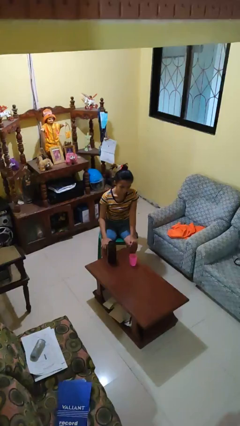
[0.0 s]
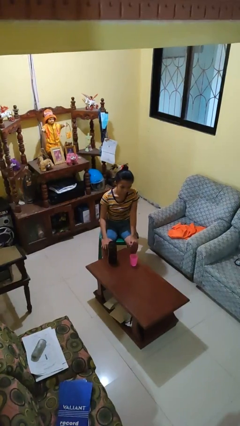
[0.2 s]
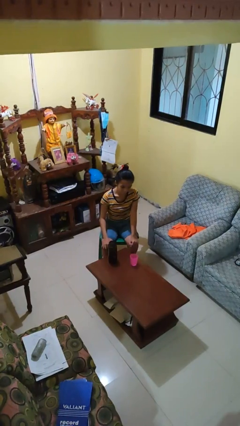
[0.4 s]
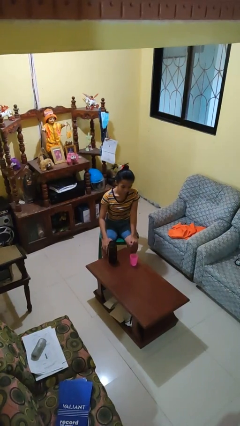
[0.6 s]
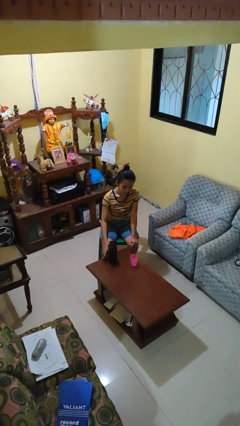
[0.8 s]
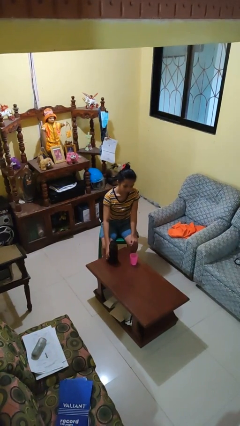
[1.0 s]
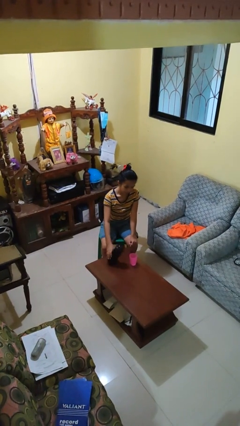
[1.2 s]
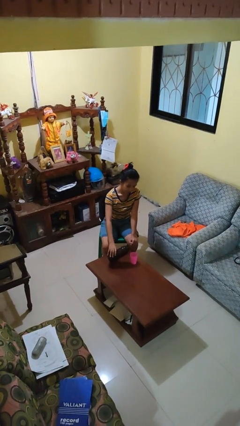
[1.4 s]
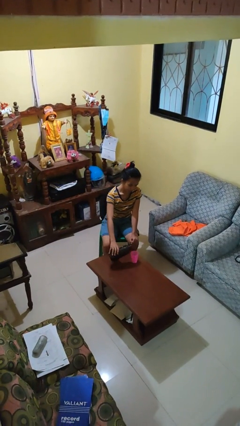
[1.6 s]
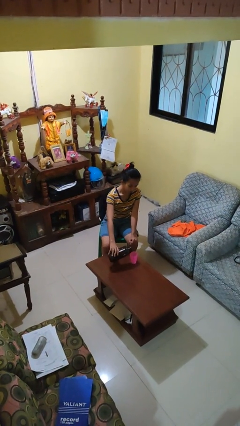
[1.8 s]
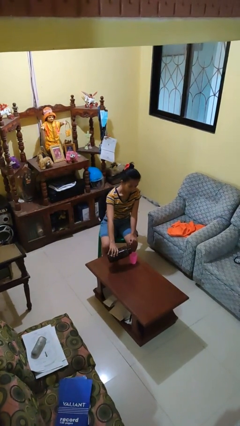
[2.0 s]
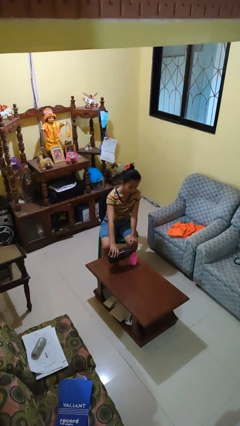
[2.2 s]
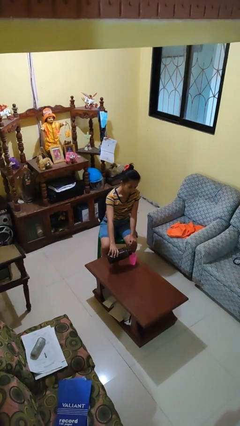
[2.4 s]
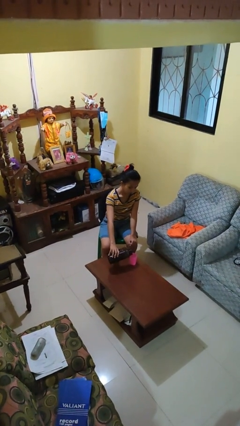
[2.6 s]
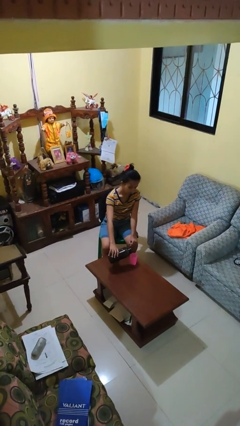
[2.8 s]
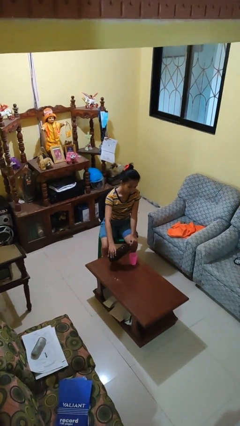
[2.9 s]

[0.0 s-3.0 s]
person pours liquid into cup

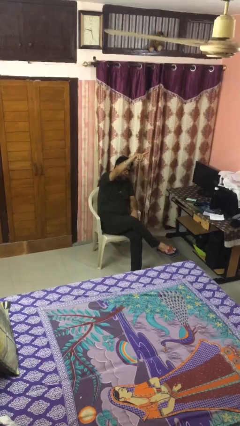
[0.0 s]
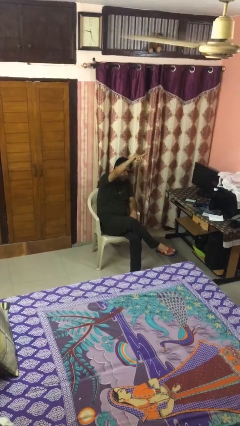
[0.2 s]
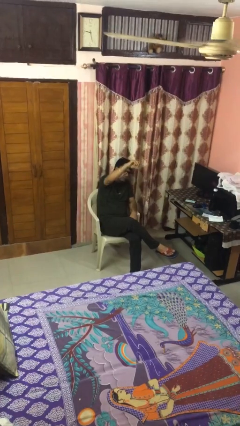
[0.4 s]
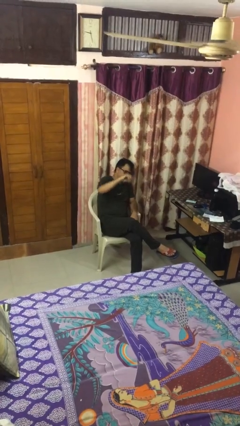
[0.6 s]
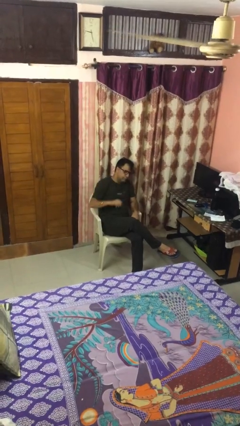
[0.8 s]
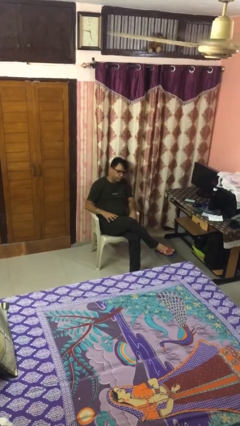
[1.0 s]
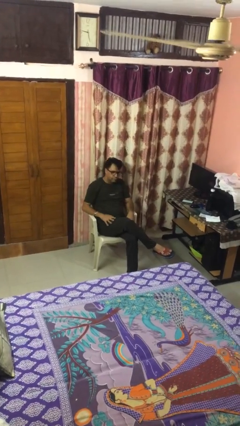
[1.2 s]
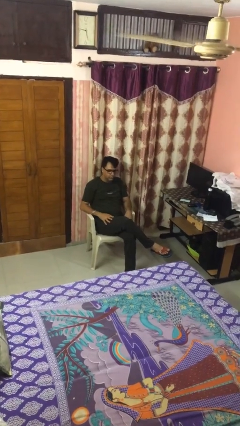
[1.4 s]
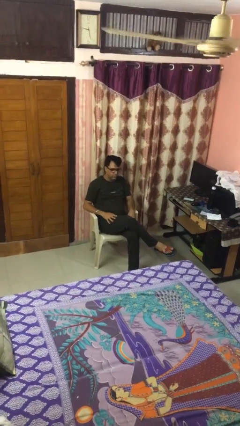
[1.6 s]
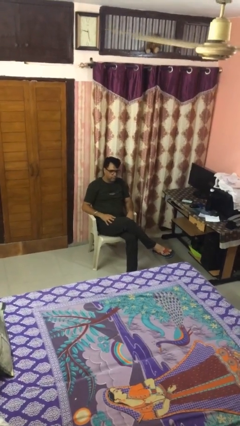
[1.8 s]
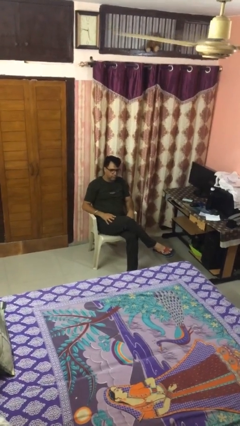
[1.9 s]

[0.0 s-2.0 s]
person gestures lower hand

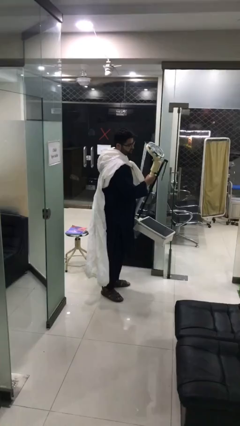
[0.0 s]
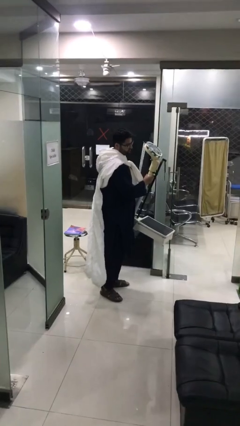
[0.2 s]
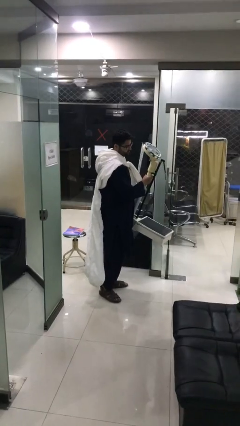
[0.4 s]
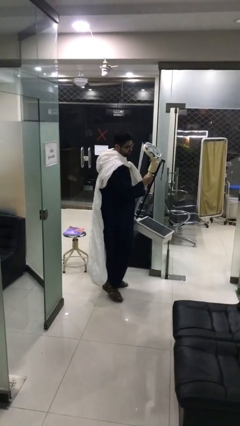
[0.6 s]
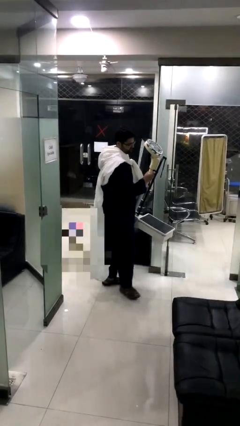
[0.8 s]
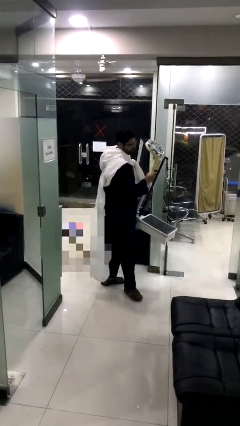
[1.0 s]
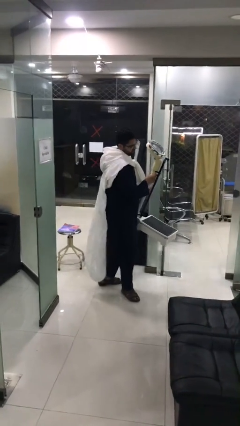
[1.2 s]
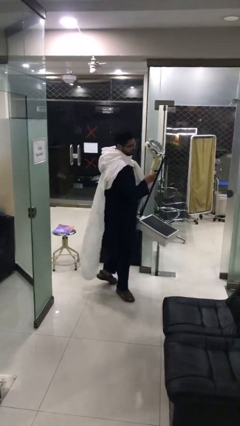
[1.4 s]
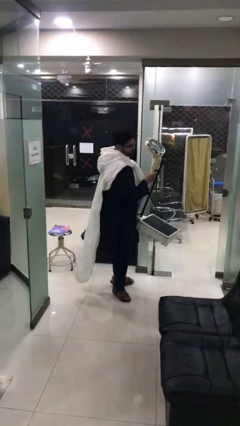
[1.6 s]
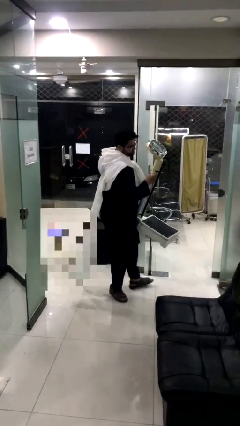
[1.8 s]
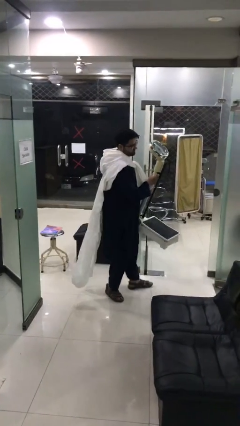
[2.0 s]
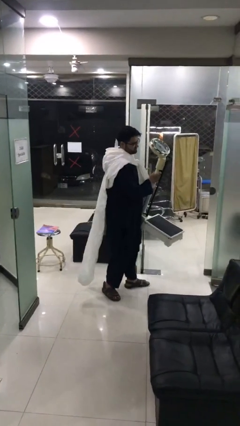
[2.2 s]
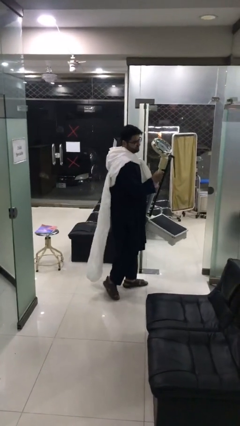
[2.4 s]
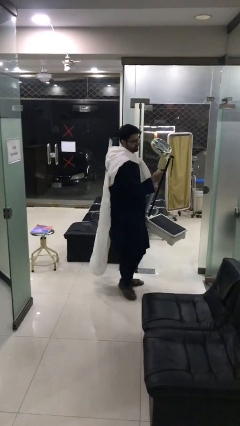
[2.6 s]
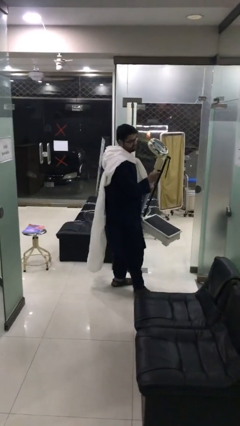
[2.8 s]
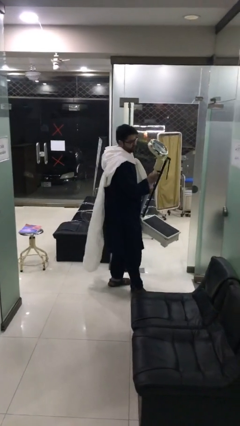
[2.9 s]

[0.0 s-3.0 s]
person carries heavy object

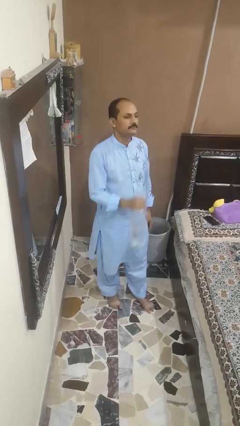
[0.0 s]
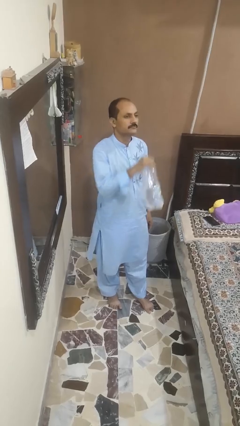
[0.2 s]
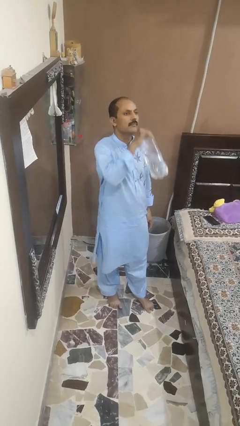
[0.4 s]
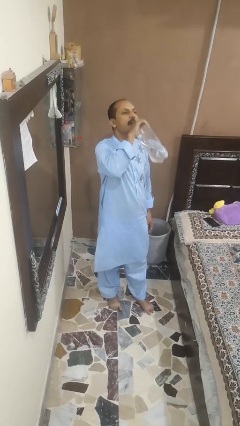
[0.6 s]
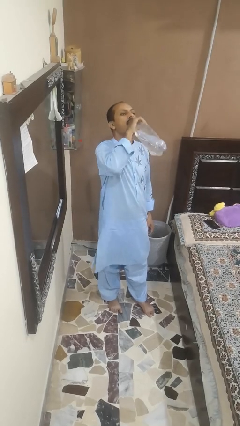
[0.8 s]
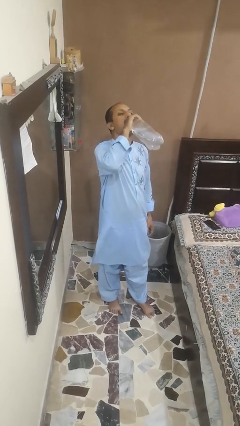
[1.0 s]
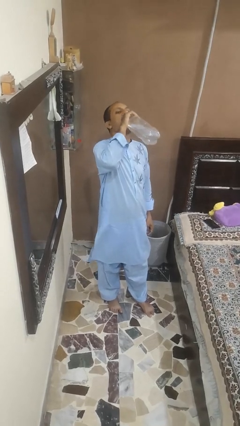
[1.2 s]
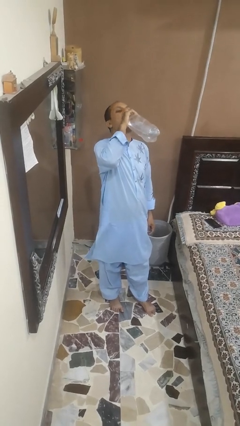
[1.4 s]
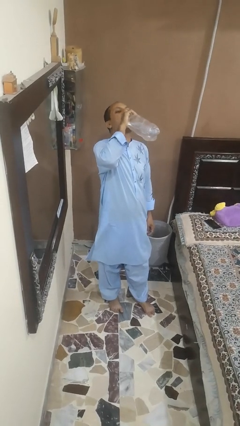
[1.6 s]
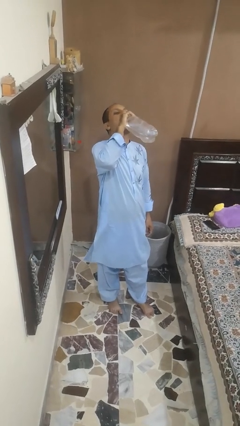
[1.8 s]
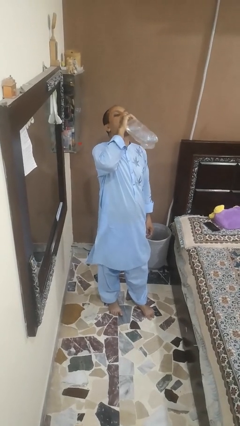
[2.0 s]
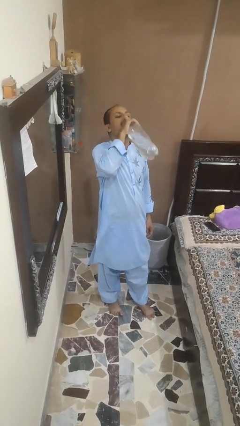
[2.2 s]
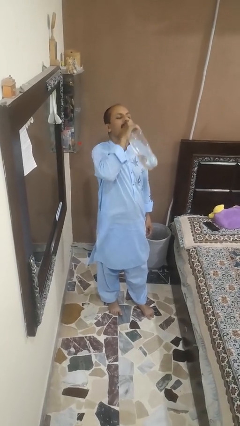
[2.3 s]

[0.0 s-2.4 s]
person drinks from bottle

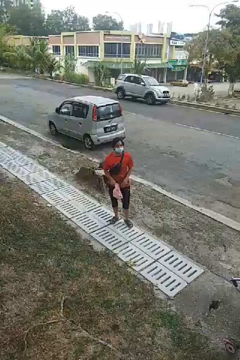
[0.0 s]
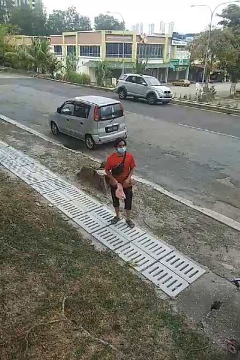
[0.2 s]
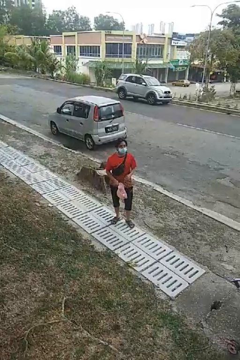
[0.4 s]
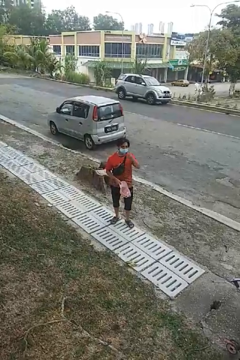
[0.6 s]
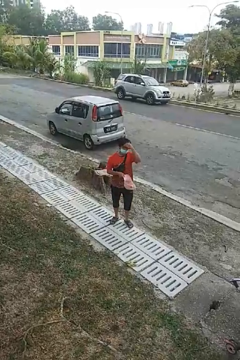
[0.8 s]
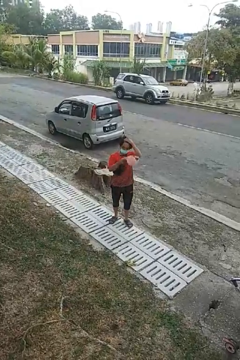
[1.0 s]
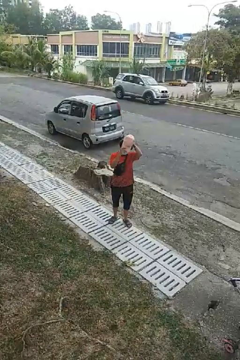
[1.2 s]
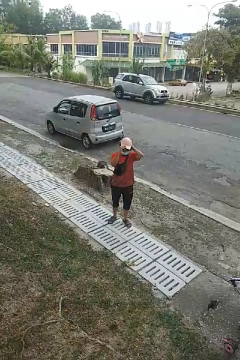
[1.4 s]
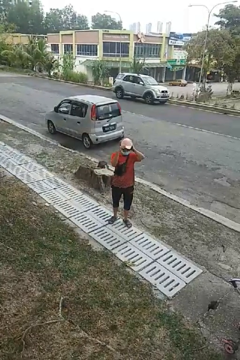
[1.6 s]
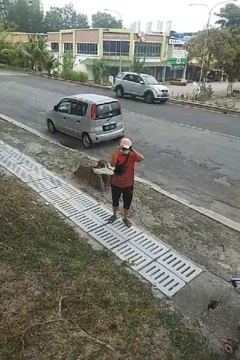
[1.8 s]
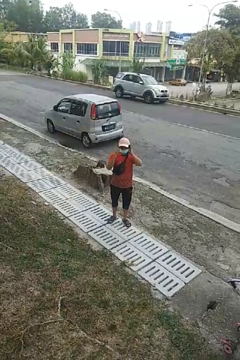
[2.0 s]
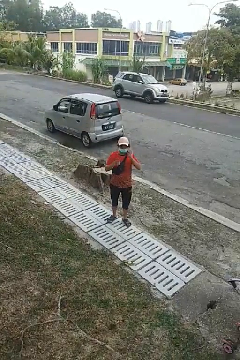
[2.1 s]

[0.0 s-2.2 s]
person puts on hat

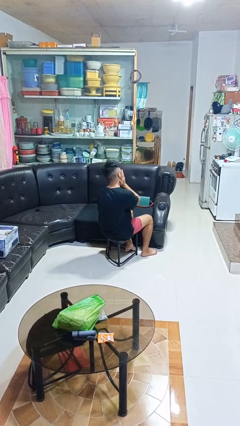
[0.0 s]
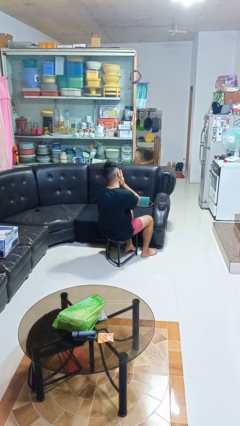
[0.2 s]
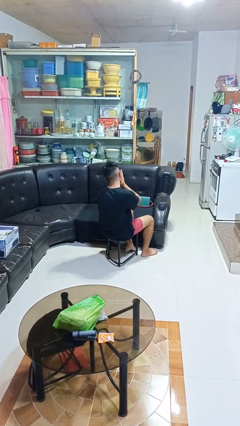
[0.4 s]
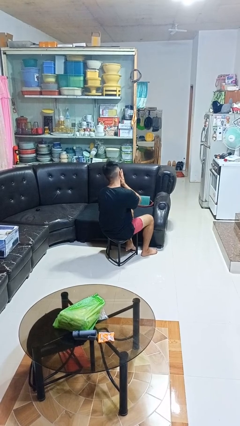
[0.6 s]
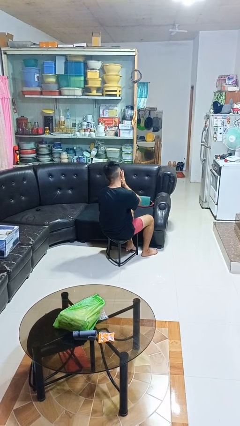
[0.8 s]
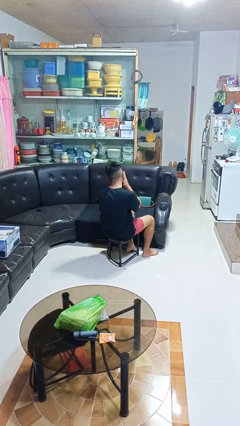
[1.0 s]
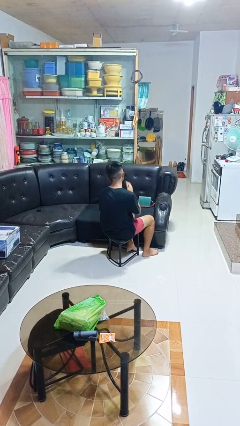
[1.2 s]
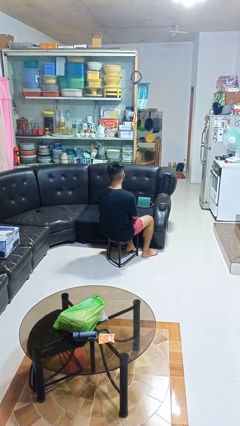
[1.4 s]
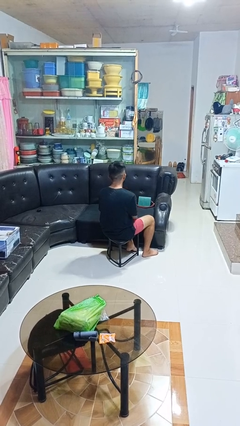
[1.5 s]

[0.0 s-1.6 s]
person swats bug

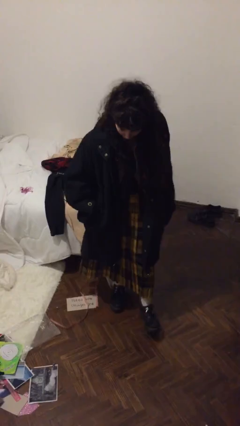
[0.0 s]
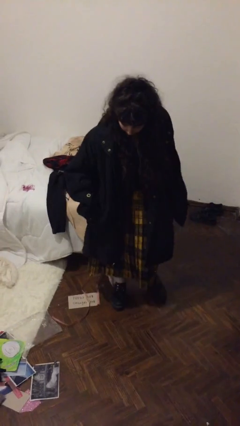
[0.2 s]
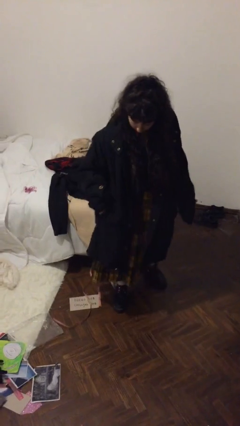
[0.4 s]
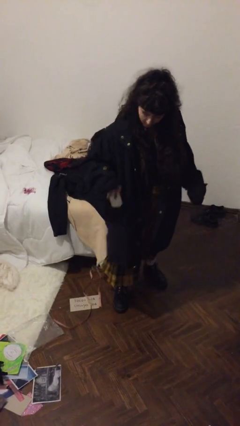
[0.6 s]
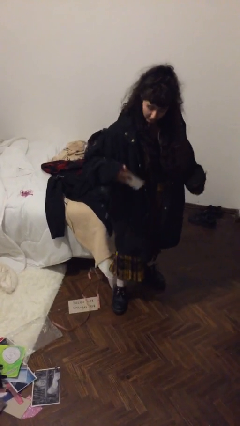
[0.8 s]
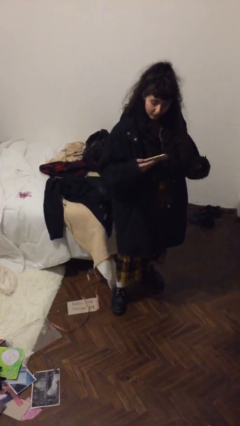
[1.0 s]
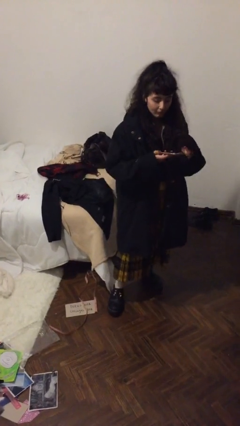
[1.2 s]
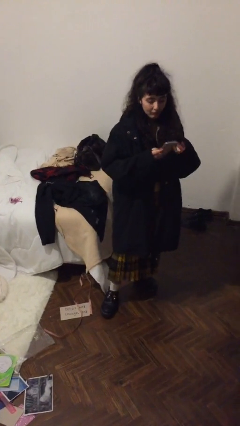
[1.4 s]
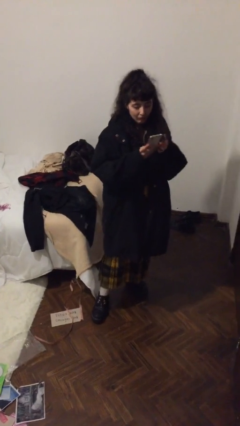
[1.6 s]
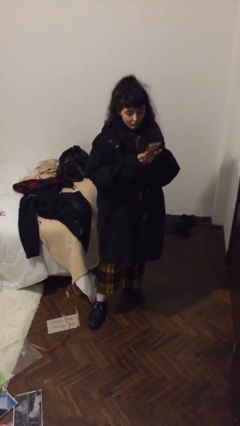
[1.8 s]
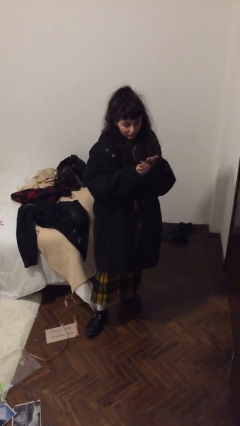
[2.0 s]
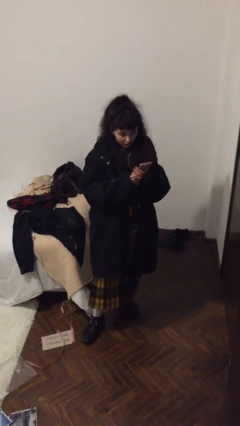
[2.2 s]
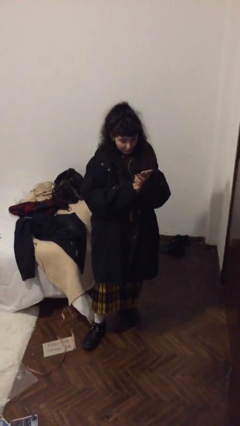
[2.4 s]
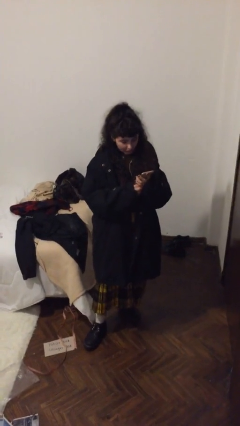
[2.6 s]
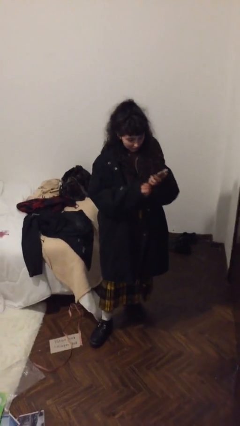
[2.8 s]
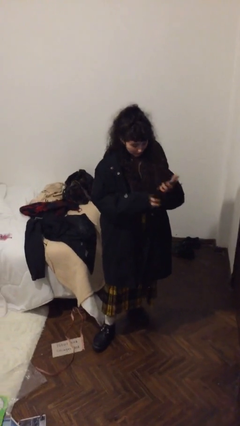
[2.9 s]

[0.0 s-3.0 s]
person takes phone from pocket

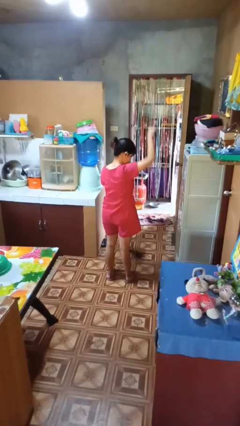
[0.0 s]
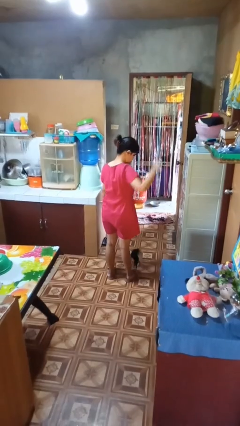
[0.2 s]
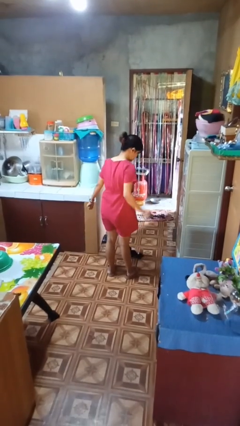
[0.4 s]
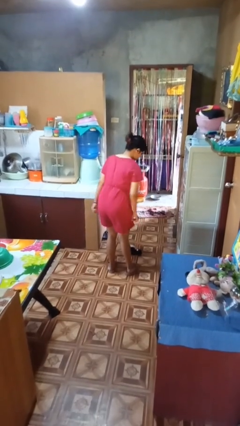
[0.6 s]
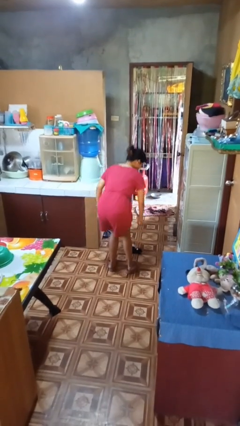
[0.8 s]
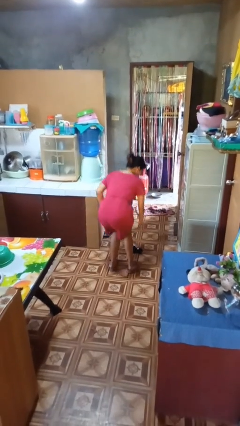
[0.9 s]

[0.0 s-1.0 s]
person catches dropped object
